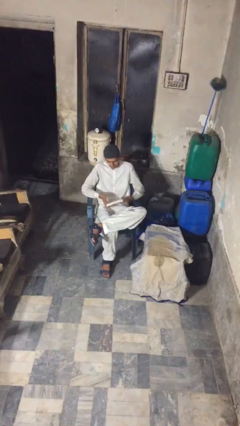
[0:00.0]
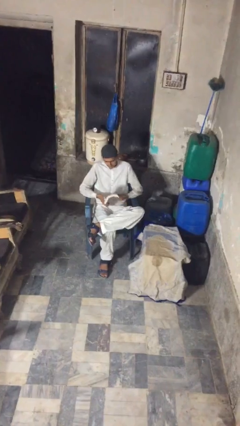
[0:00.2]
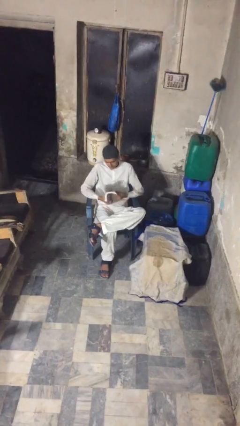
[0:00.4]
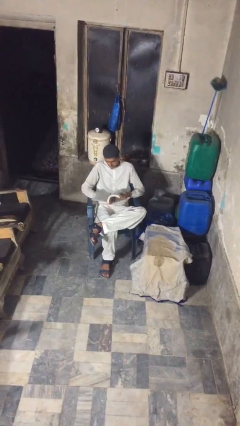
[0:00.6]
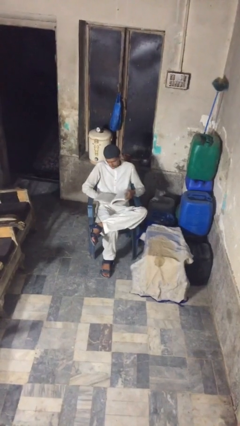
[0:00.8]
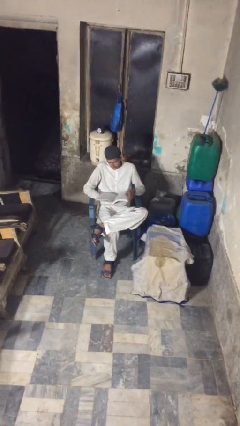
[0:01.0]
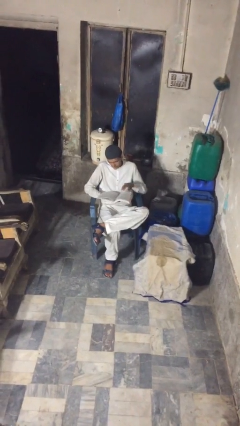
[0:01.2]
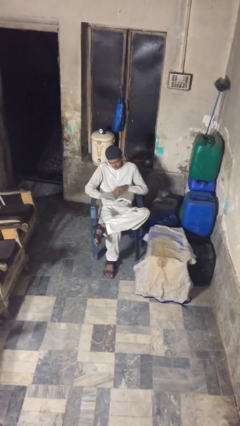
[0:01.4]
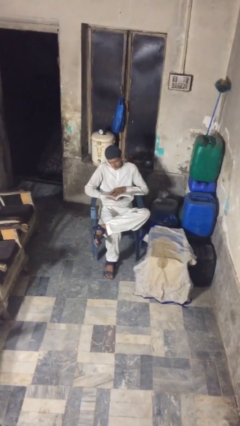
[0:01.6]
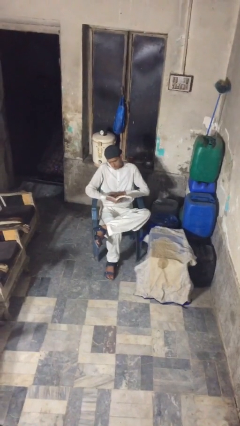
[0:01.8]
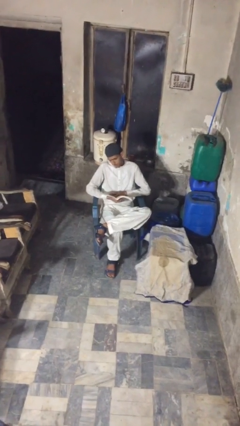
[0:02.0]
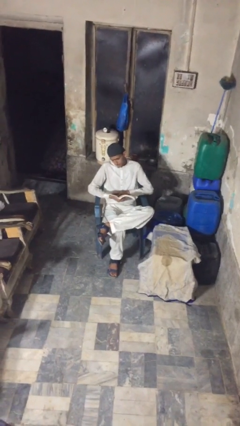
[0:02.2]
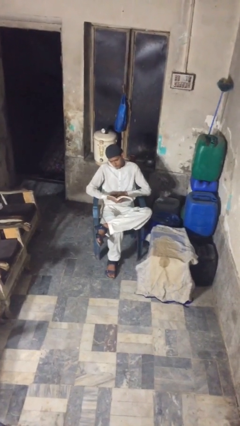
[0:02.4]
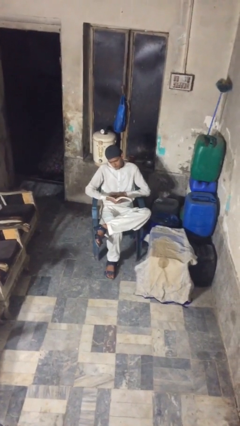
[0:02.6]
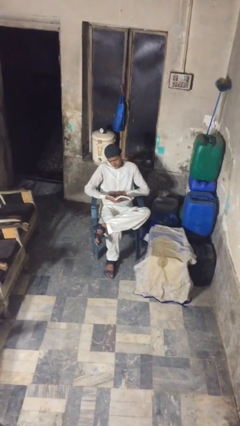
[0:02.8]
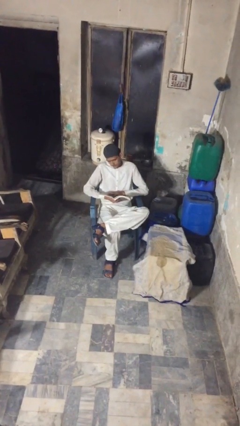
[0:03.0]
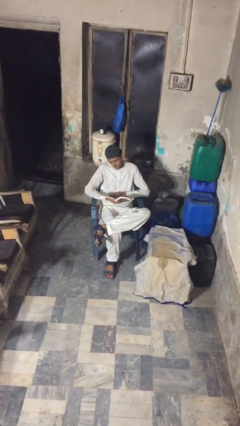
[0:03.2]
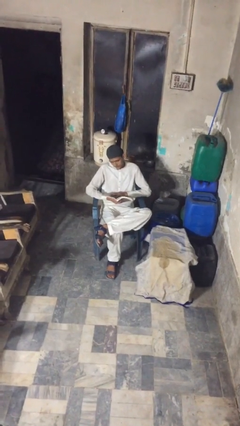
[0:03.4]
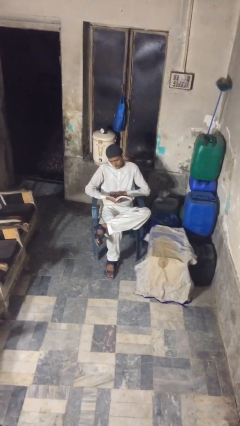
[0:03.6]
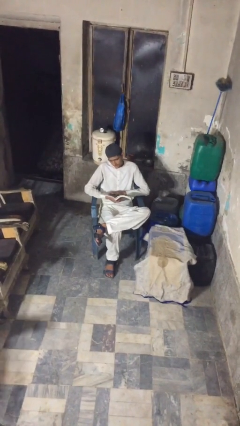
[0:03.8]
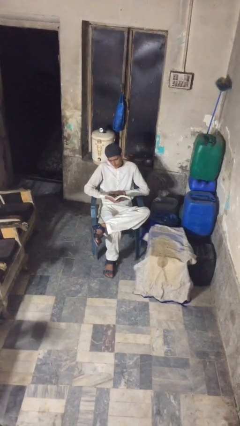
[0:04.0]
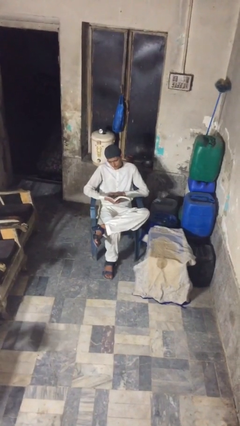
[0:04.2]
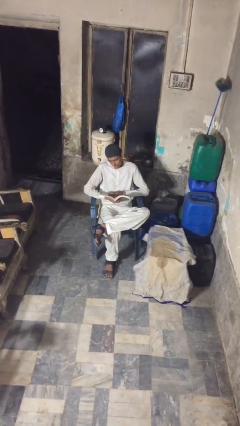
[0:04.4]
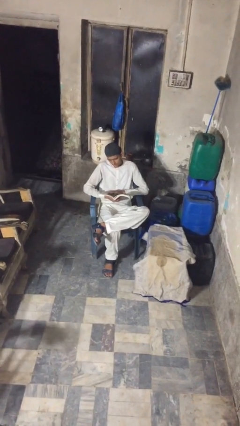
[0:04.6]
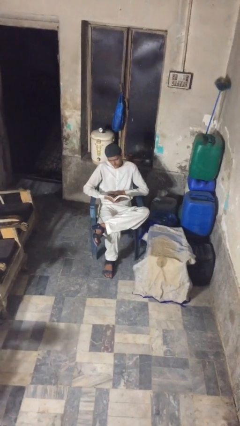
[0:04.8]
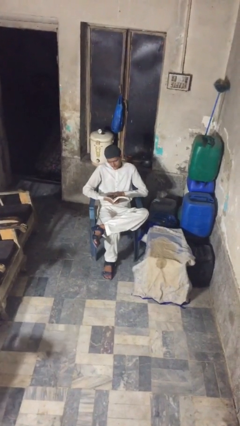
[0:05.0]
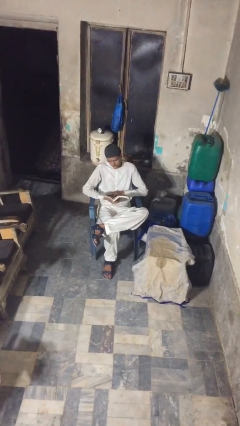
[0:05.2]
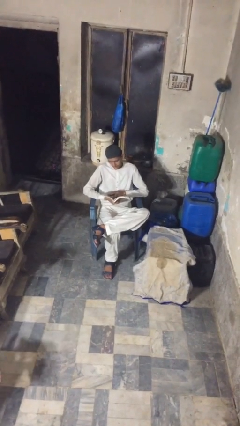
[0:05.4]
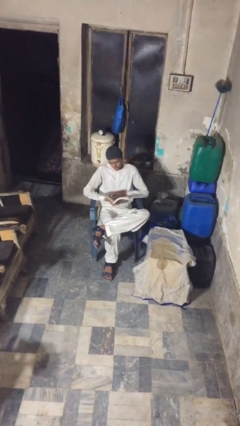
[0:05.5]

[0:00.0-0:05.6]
person reads document

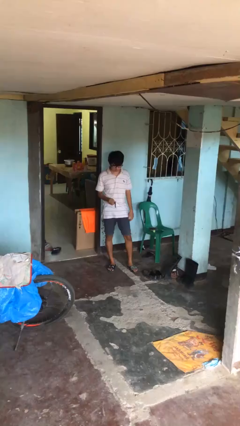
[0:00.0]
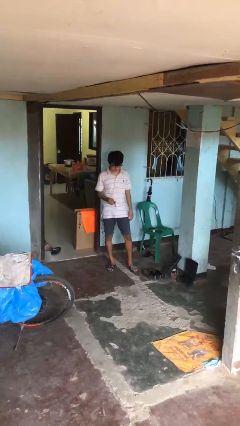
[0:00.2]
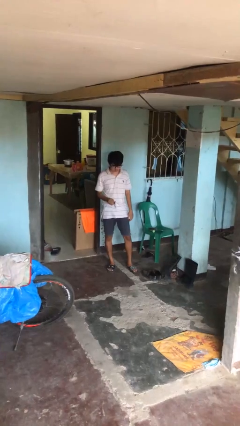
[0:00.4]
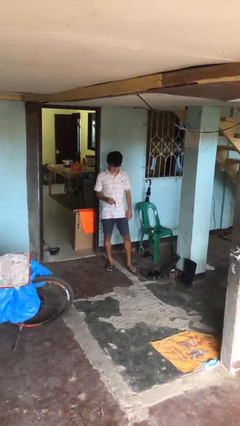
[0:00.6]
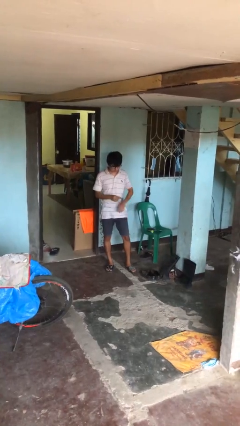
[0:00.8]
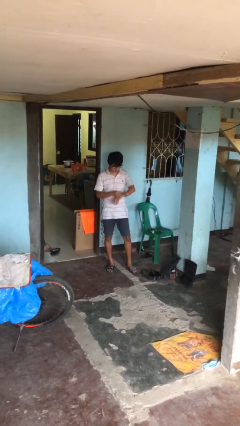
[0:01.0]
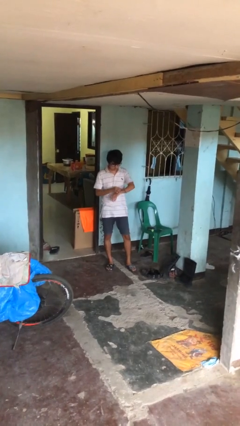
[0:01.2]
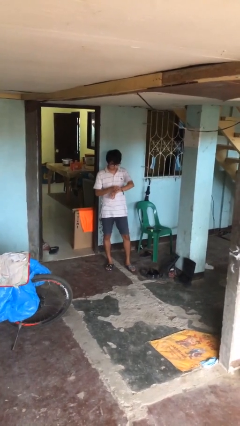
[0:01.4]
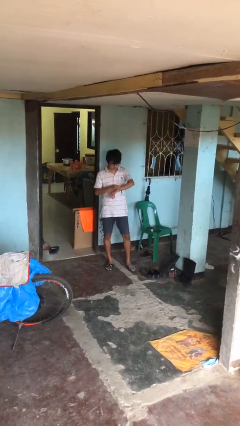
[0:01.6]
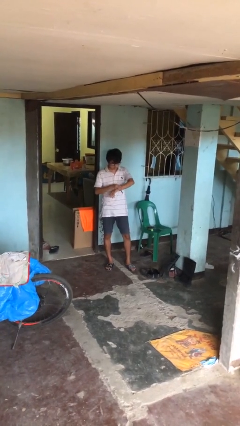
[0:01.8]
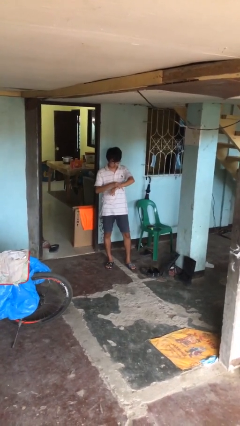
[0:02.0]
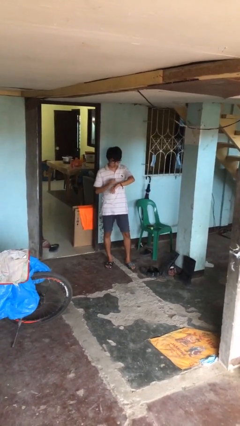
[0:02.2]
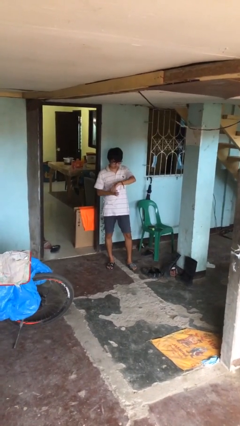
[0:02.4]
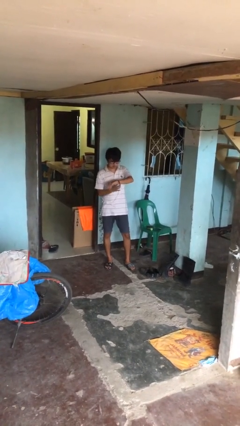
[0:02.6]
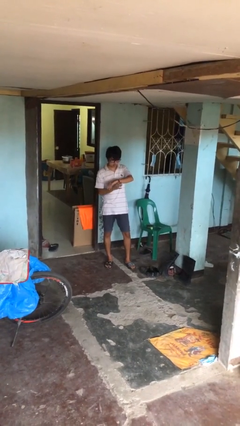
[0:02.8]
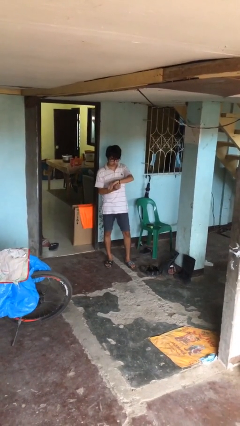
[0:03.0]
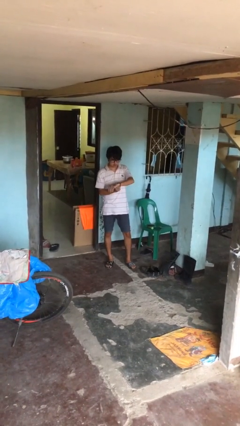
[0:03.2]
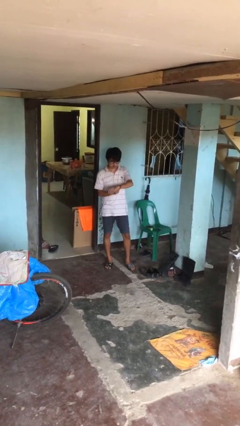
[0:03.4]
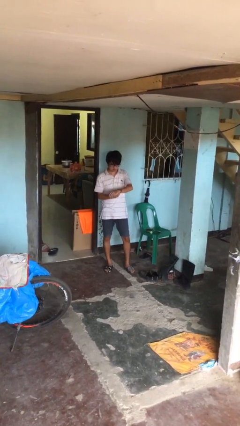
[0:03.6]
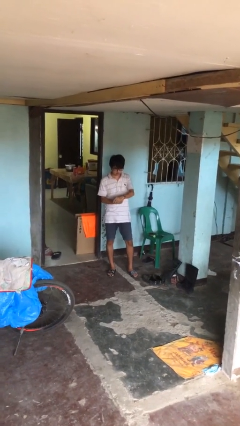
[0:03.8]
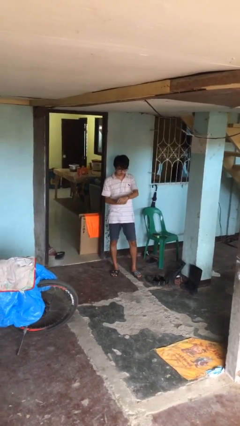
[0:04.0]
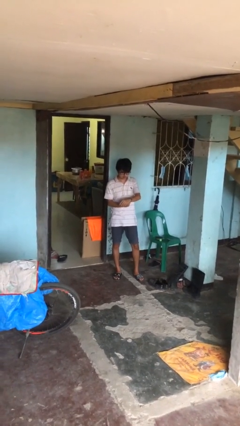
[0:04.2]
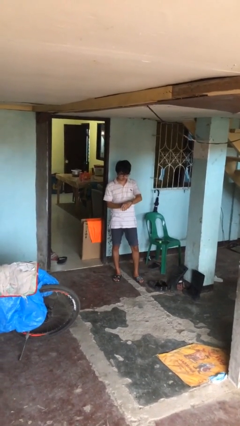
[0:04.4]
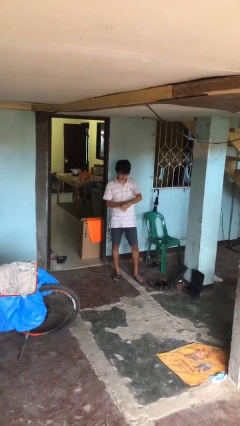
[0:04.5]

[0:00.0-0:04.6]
person puts on wristwatch

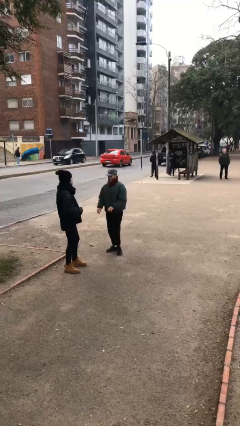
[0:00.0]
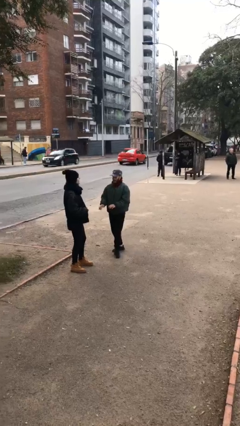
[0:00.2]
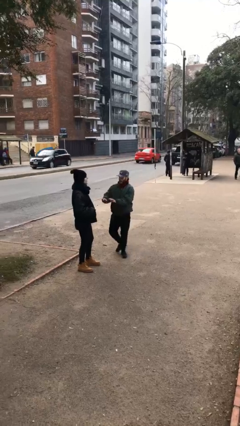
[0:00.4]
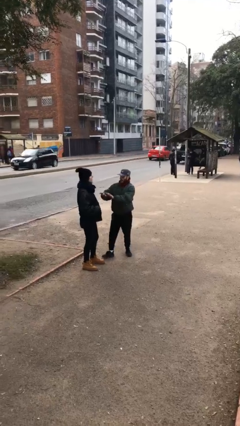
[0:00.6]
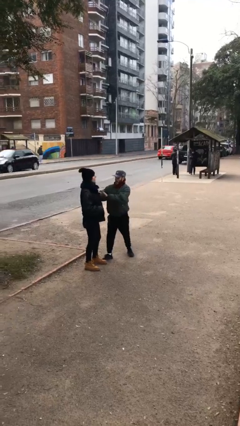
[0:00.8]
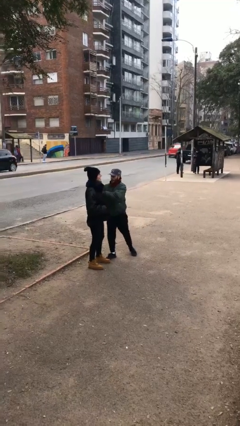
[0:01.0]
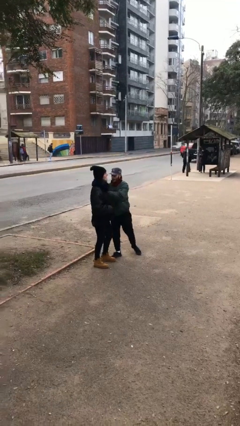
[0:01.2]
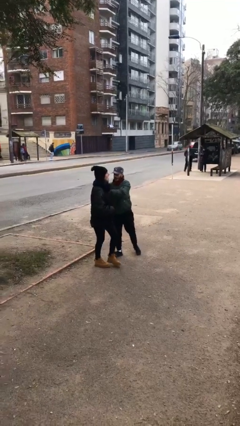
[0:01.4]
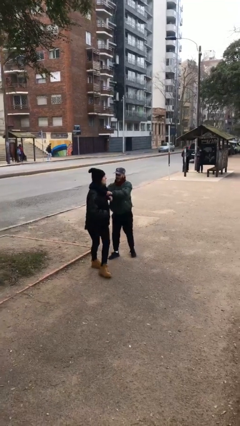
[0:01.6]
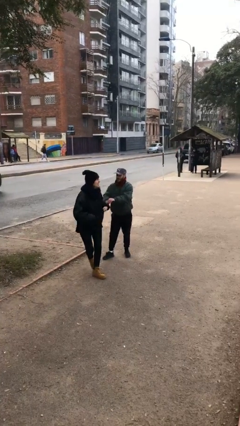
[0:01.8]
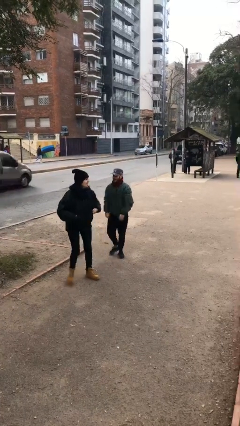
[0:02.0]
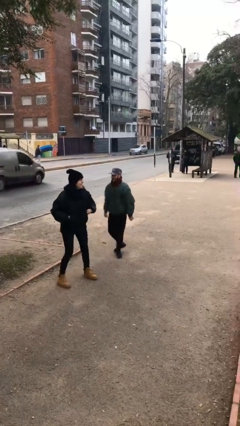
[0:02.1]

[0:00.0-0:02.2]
person shoves person

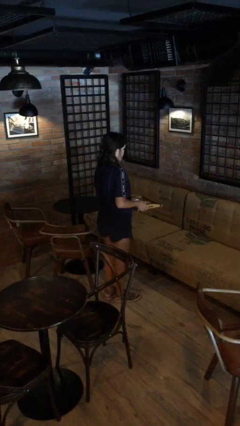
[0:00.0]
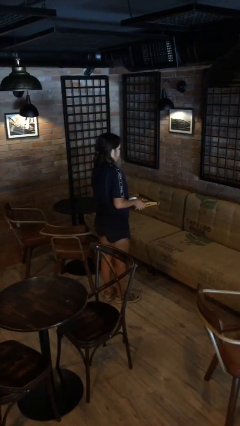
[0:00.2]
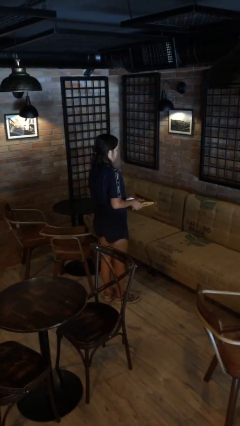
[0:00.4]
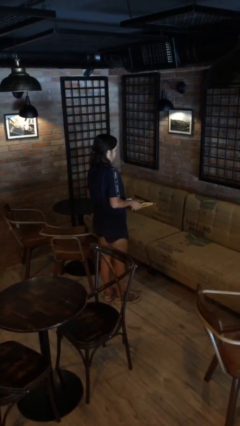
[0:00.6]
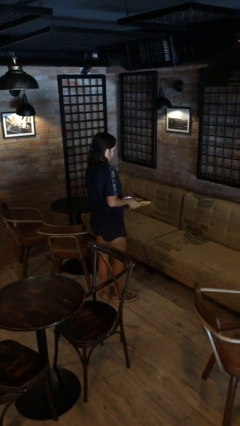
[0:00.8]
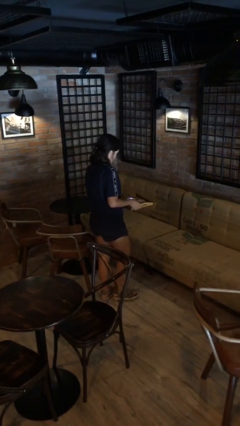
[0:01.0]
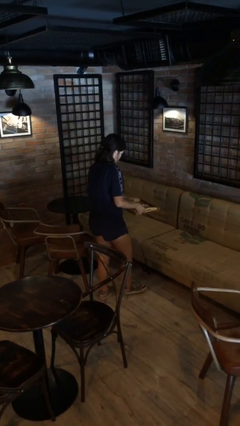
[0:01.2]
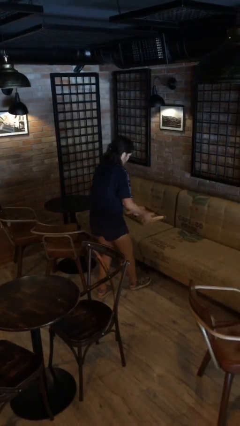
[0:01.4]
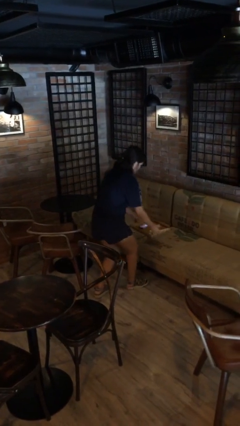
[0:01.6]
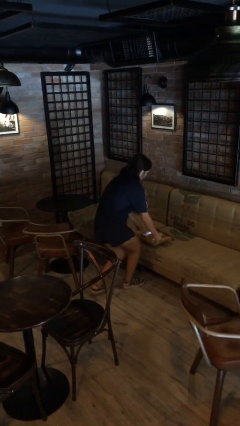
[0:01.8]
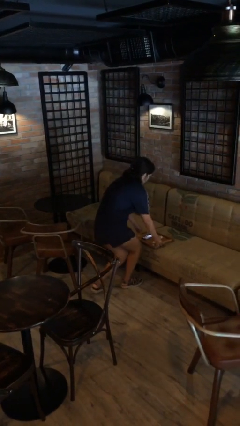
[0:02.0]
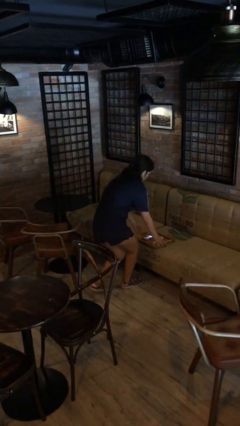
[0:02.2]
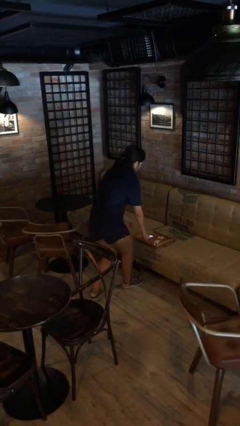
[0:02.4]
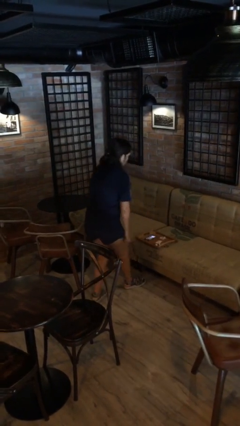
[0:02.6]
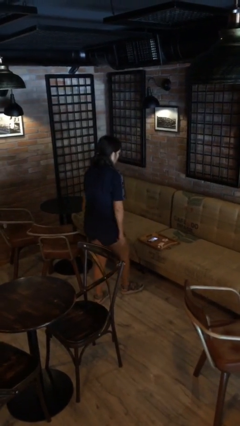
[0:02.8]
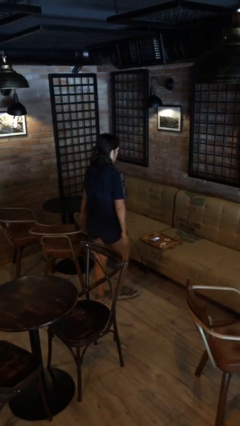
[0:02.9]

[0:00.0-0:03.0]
person puts down object on couch

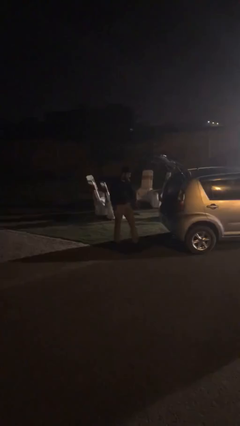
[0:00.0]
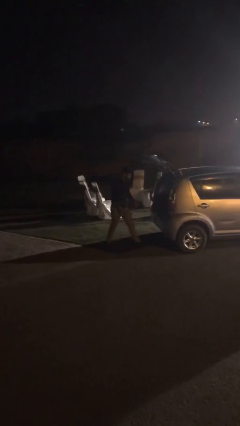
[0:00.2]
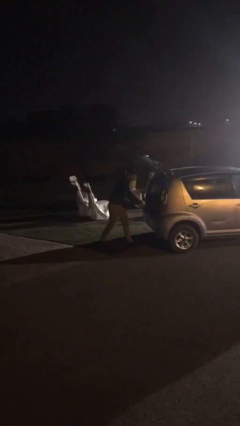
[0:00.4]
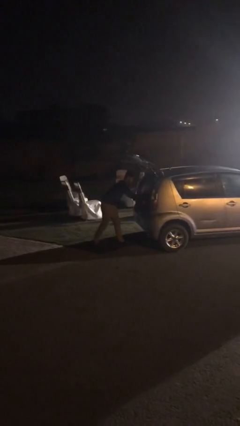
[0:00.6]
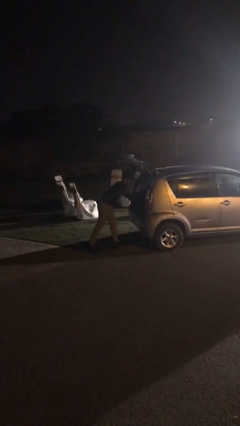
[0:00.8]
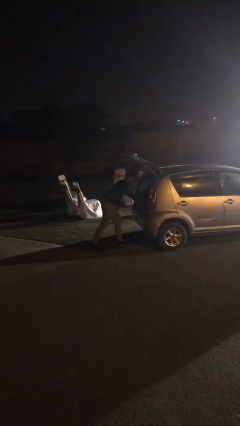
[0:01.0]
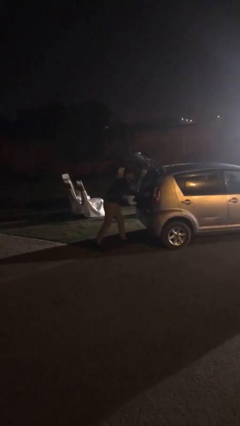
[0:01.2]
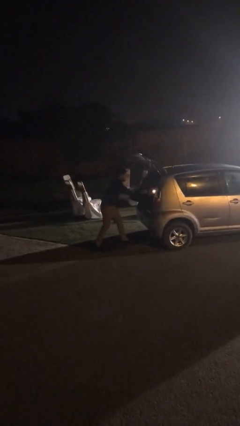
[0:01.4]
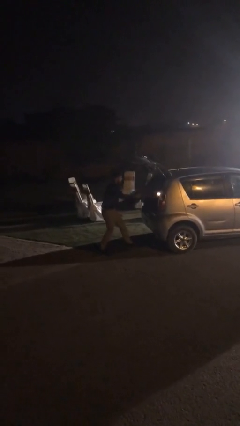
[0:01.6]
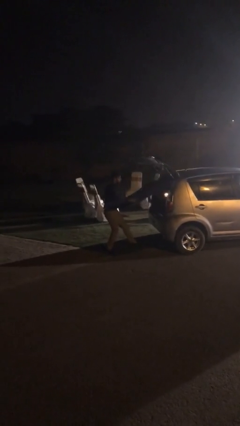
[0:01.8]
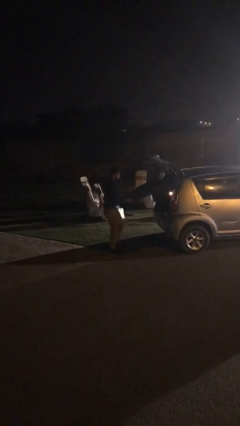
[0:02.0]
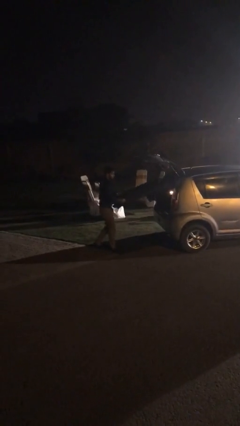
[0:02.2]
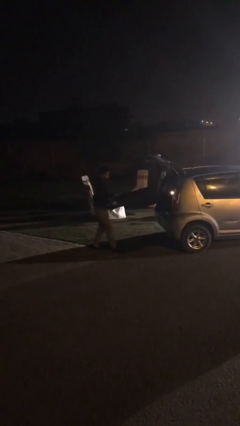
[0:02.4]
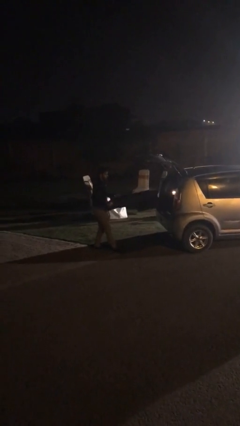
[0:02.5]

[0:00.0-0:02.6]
person unloads car
